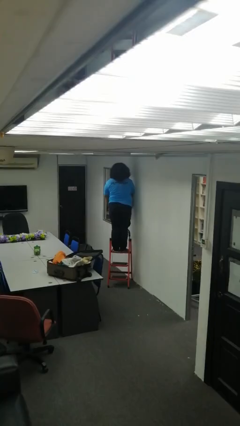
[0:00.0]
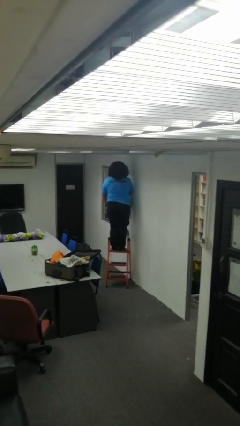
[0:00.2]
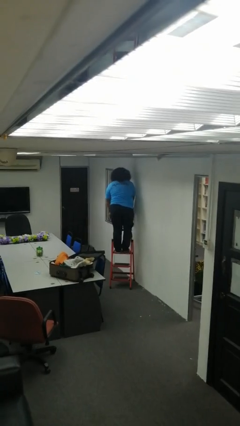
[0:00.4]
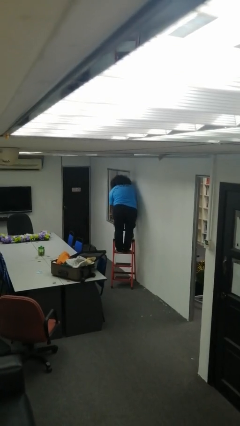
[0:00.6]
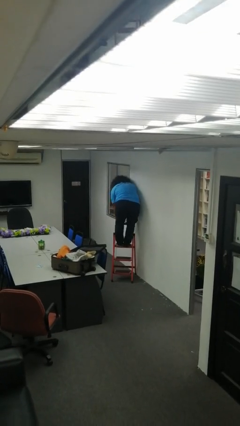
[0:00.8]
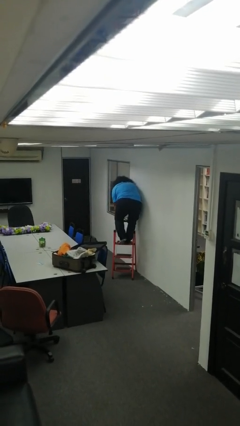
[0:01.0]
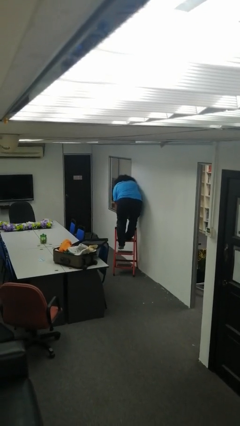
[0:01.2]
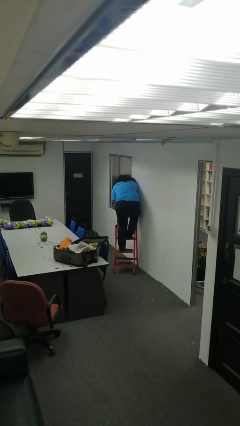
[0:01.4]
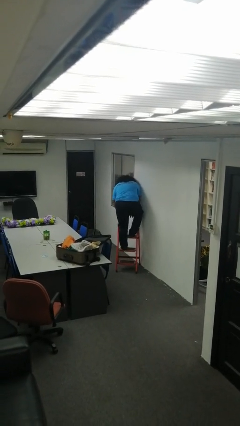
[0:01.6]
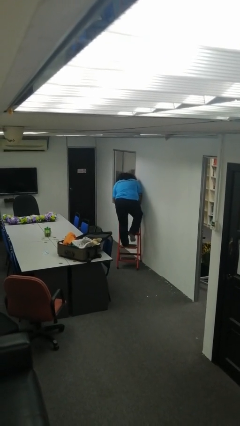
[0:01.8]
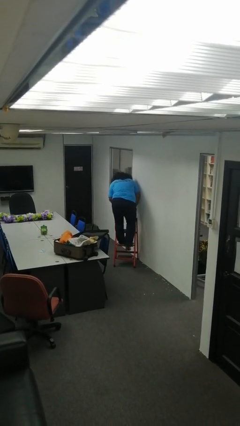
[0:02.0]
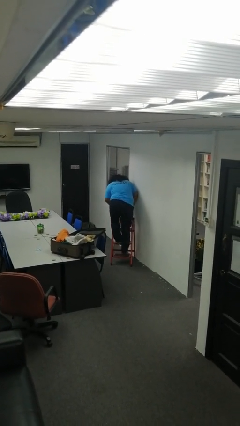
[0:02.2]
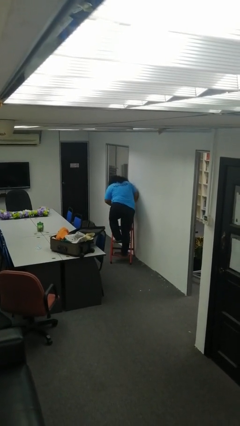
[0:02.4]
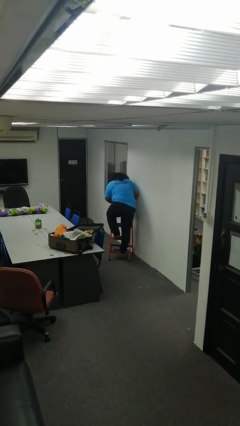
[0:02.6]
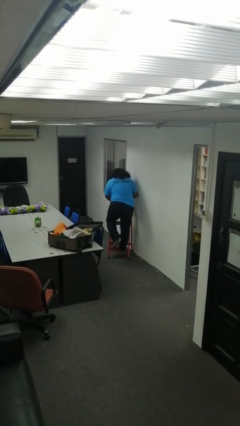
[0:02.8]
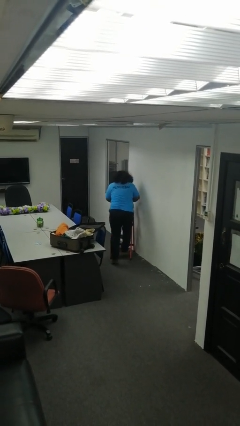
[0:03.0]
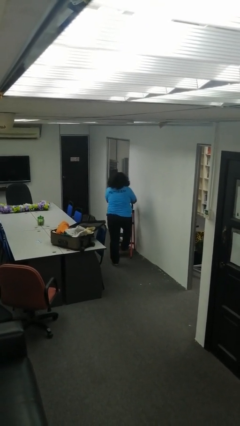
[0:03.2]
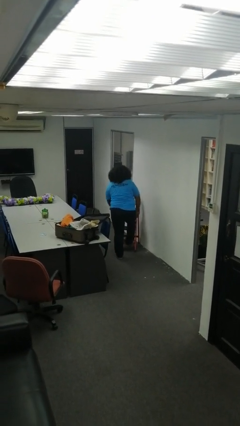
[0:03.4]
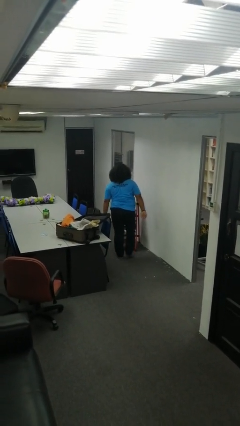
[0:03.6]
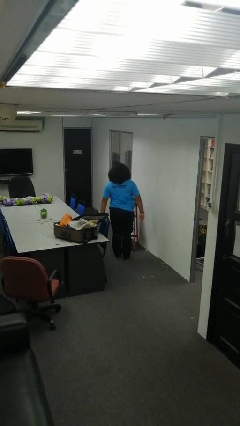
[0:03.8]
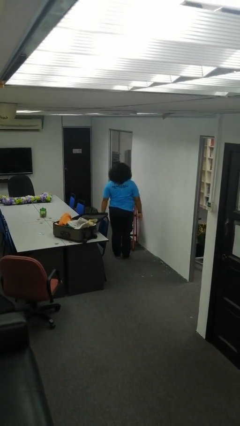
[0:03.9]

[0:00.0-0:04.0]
person climbs down ladder

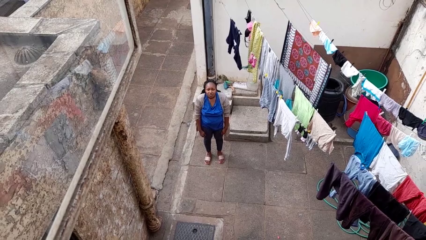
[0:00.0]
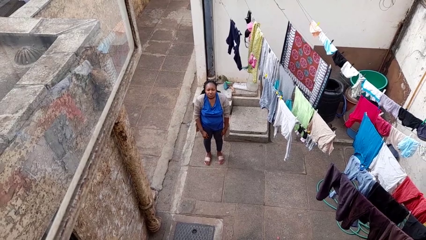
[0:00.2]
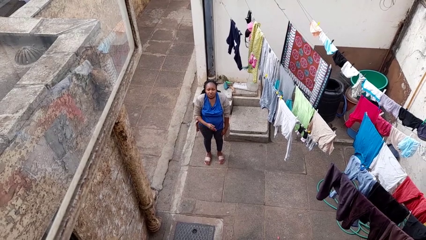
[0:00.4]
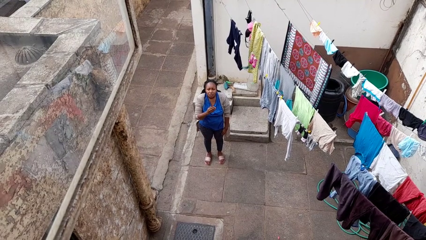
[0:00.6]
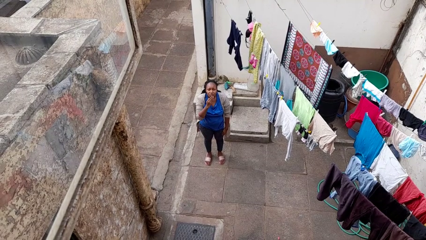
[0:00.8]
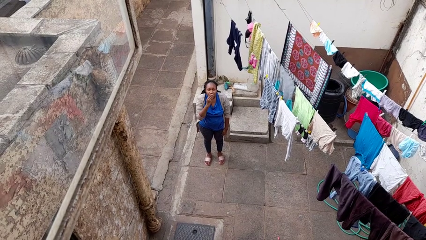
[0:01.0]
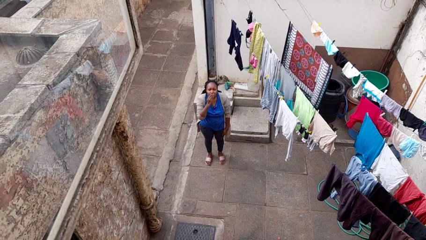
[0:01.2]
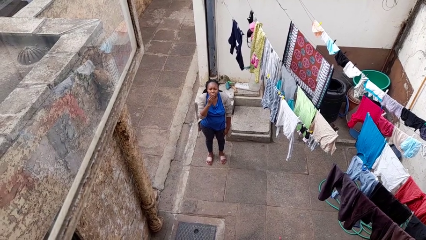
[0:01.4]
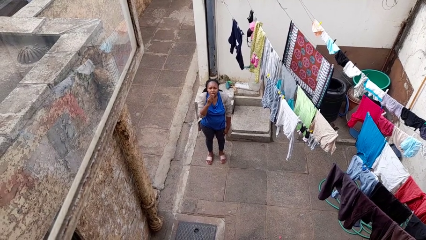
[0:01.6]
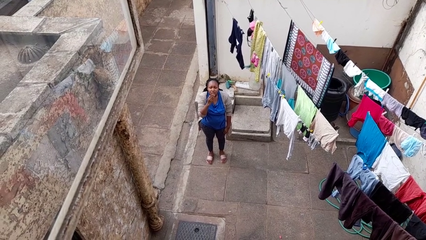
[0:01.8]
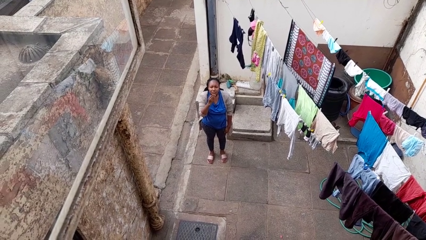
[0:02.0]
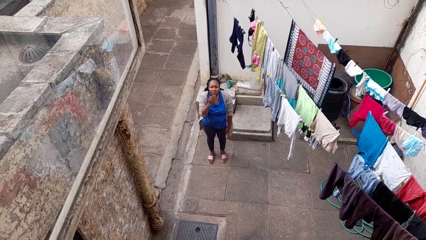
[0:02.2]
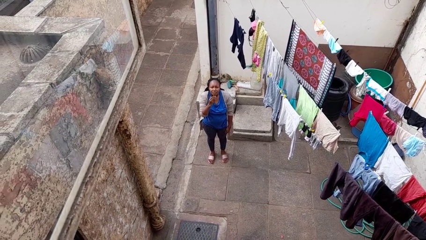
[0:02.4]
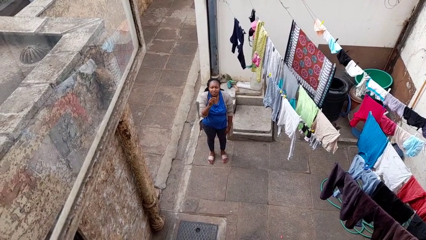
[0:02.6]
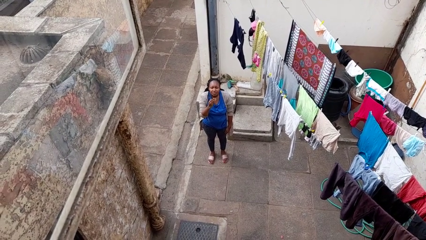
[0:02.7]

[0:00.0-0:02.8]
person gestures blow kiss

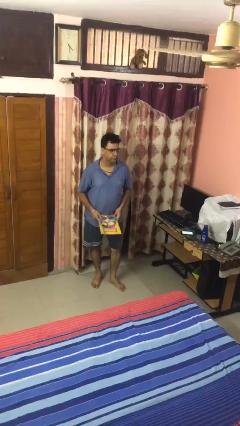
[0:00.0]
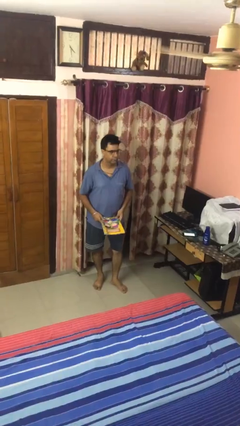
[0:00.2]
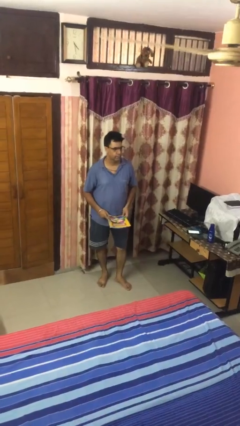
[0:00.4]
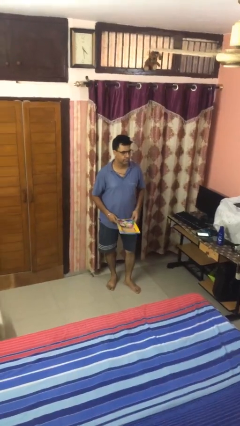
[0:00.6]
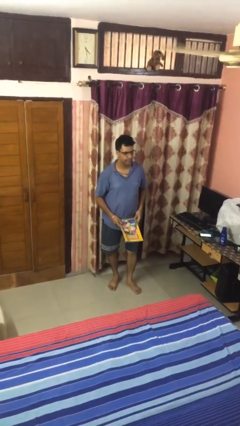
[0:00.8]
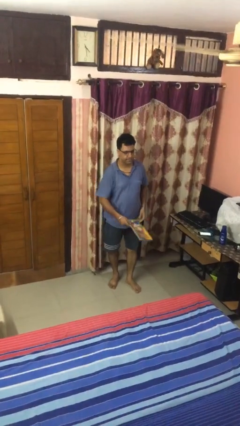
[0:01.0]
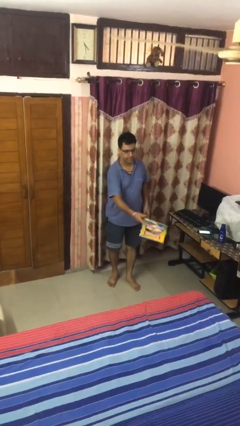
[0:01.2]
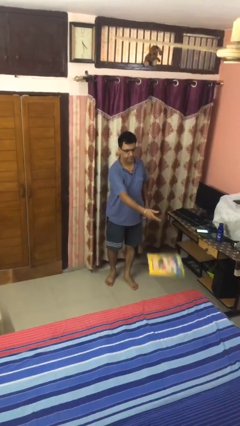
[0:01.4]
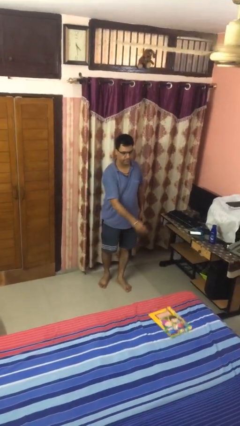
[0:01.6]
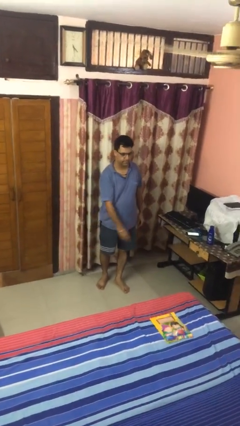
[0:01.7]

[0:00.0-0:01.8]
person throws object on bed

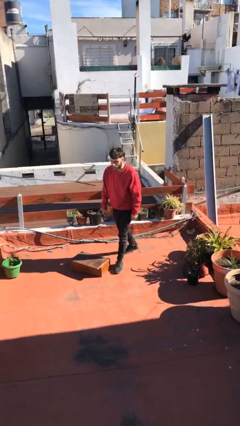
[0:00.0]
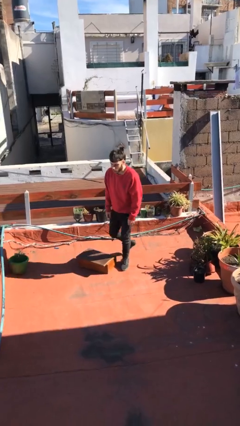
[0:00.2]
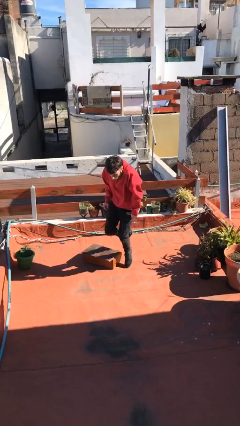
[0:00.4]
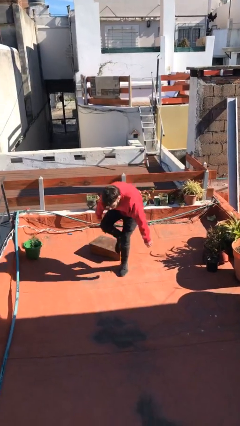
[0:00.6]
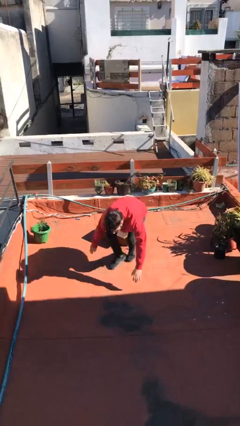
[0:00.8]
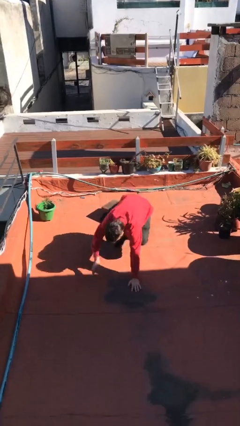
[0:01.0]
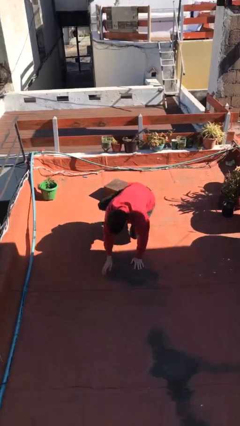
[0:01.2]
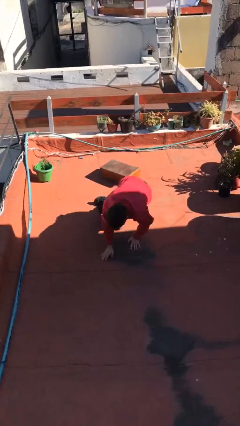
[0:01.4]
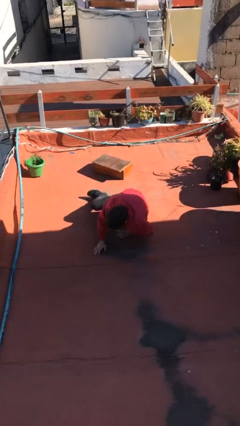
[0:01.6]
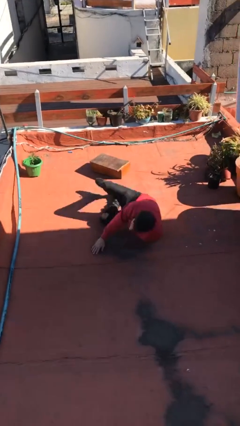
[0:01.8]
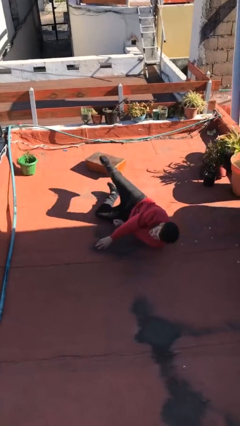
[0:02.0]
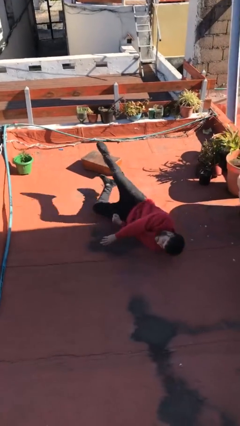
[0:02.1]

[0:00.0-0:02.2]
person trips on object on floor

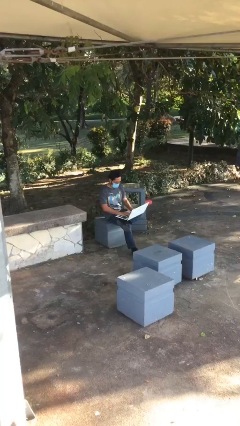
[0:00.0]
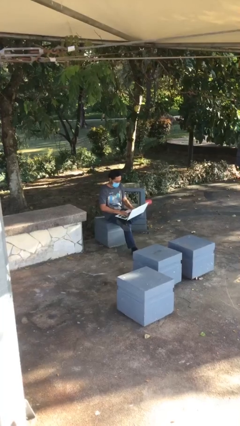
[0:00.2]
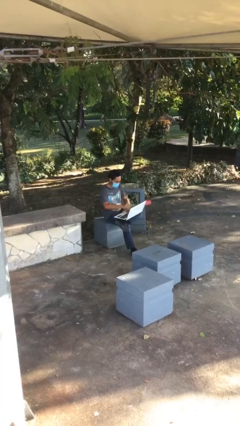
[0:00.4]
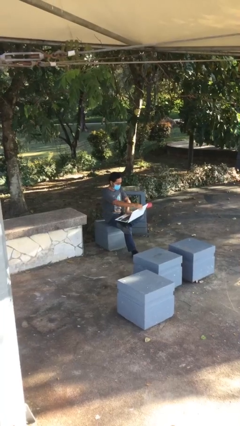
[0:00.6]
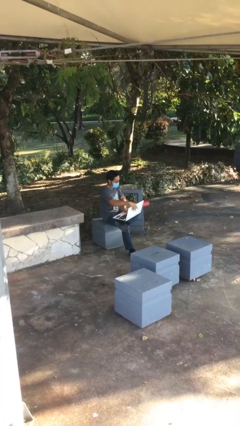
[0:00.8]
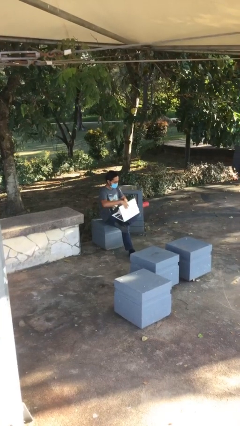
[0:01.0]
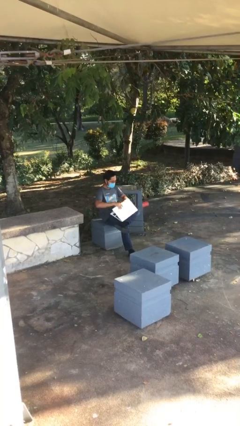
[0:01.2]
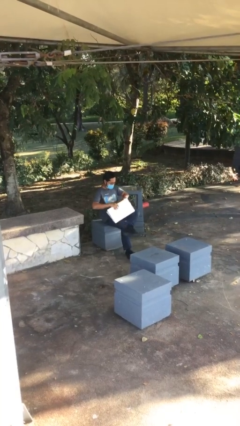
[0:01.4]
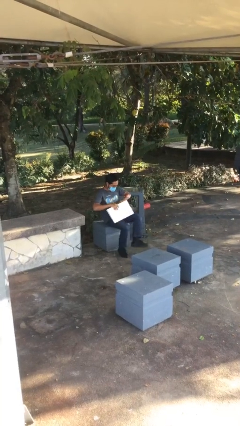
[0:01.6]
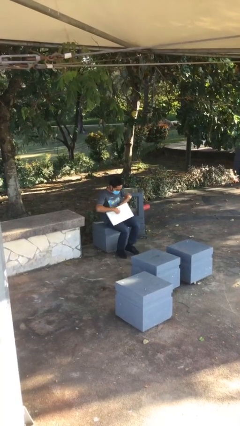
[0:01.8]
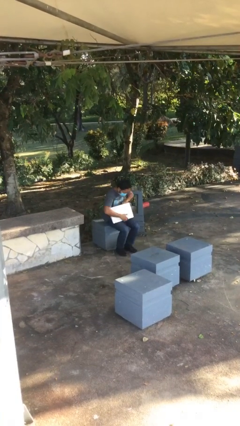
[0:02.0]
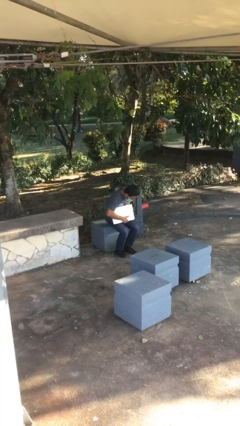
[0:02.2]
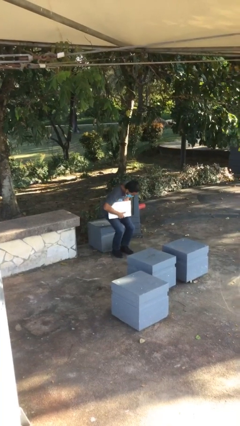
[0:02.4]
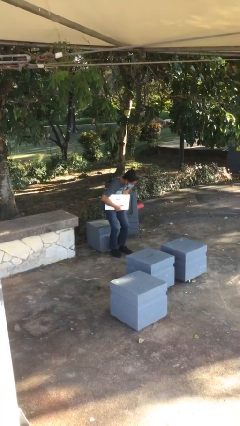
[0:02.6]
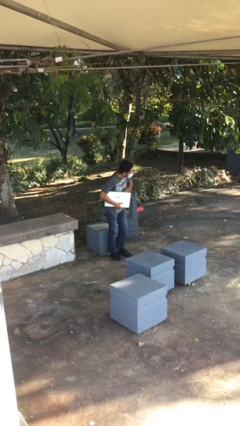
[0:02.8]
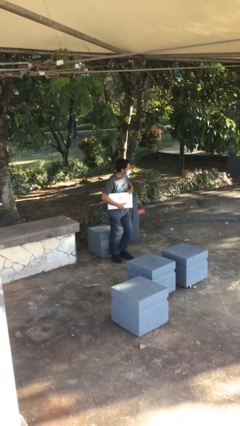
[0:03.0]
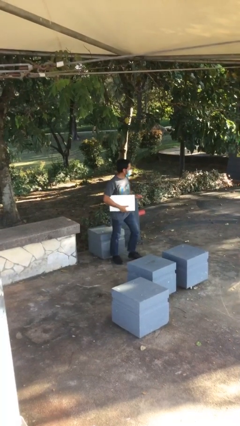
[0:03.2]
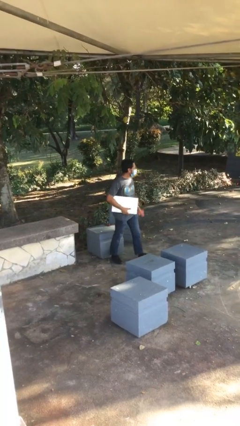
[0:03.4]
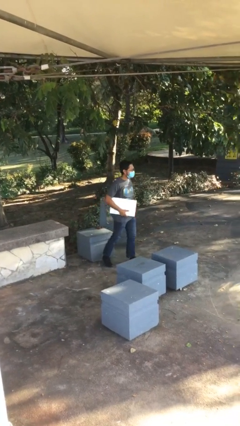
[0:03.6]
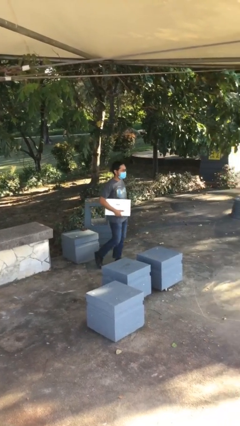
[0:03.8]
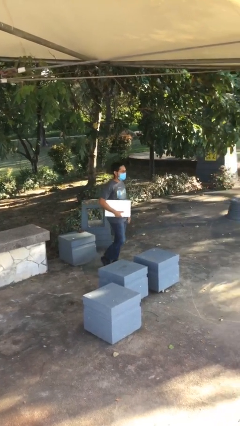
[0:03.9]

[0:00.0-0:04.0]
person stands up

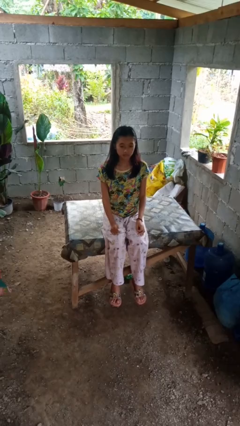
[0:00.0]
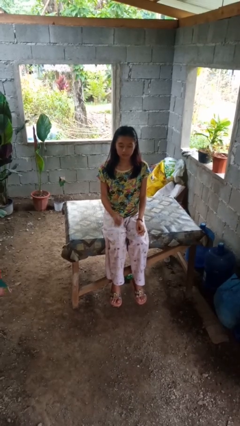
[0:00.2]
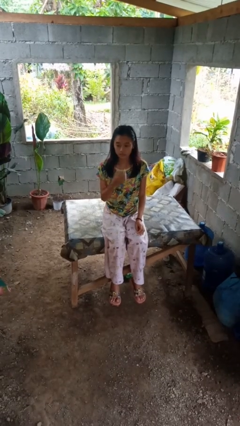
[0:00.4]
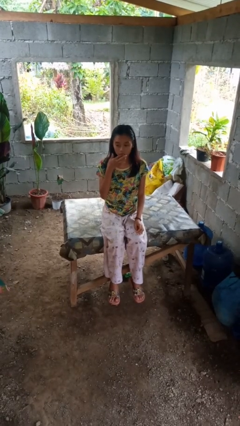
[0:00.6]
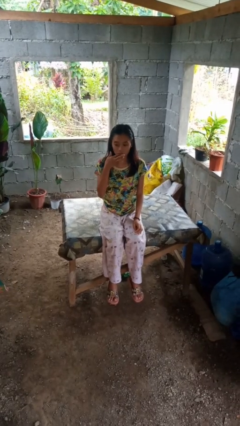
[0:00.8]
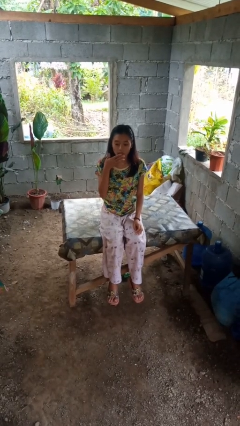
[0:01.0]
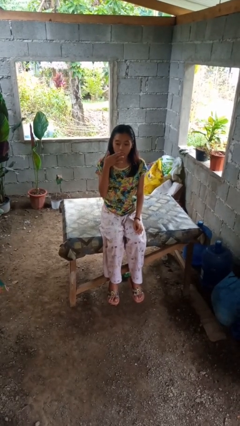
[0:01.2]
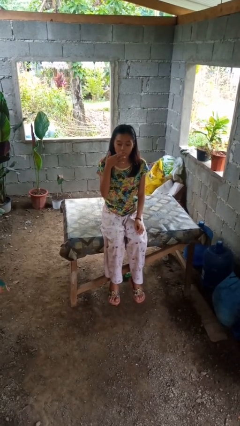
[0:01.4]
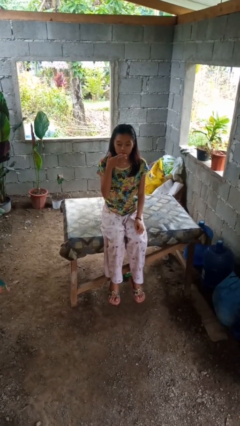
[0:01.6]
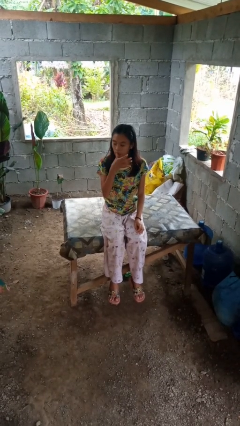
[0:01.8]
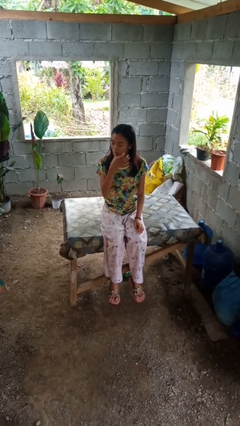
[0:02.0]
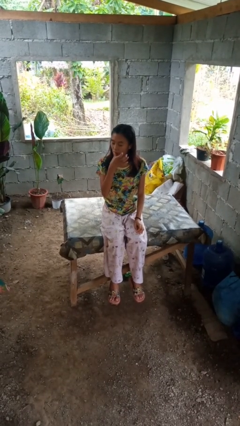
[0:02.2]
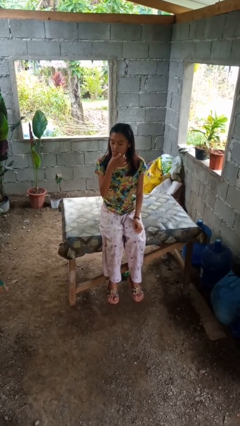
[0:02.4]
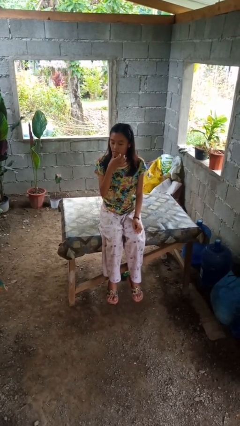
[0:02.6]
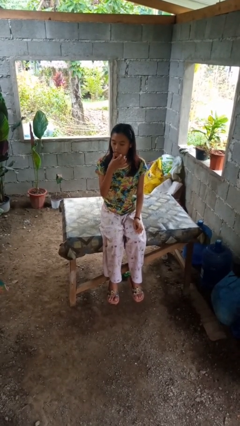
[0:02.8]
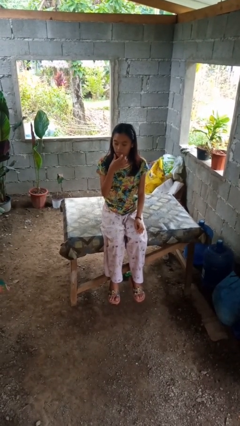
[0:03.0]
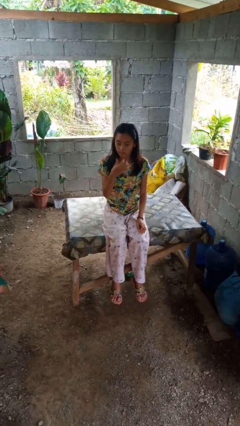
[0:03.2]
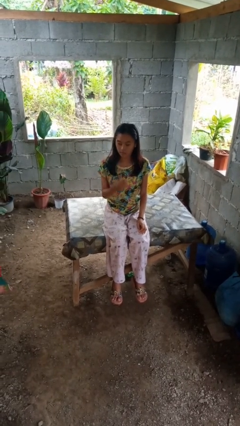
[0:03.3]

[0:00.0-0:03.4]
person licks fingers
